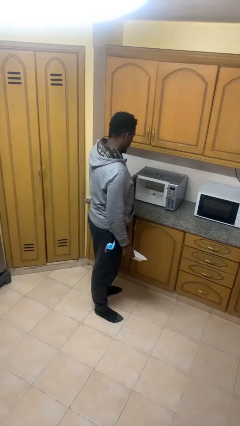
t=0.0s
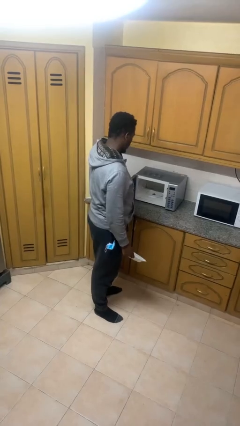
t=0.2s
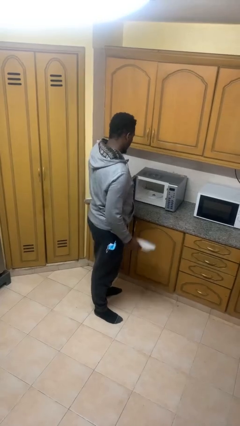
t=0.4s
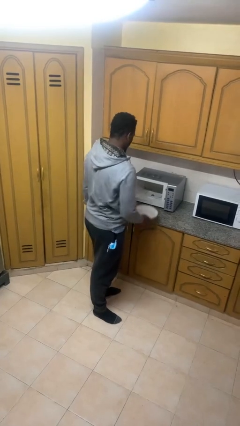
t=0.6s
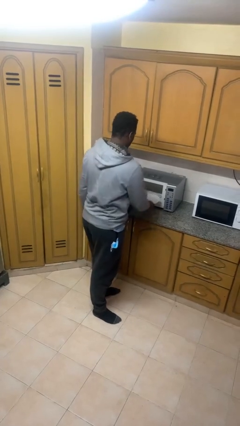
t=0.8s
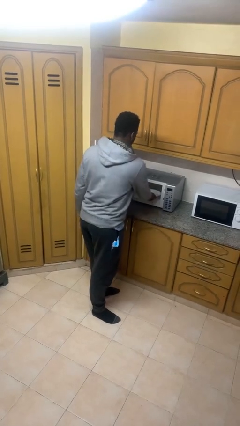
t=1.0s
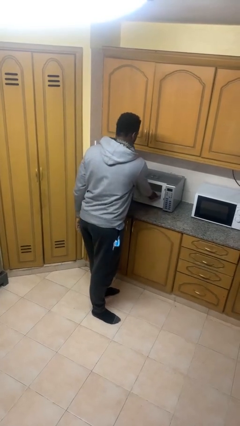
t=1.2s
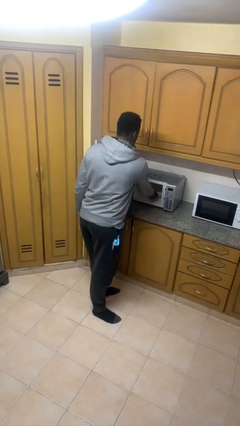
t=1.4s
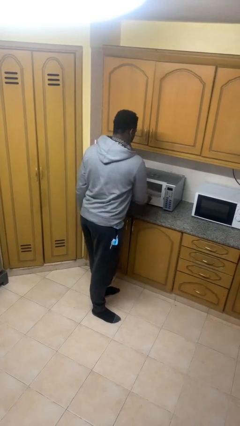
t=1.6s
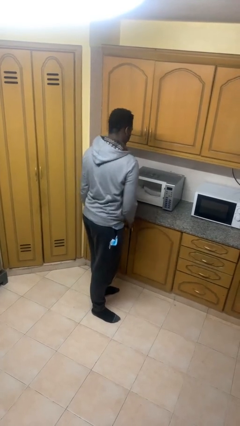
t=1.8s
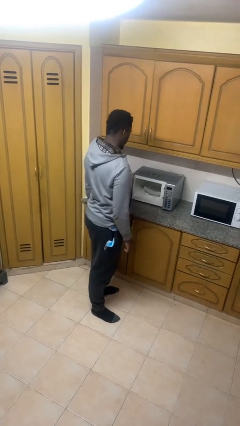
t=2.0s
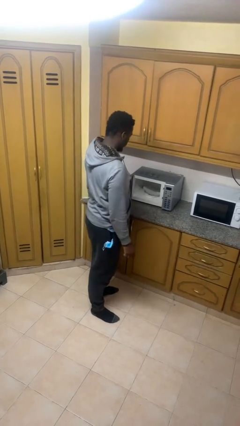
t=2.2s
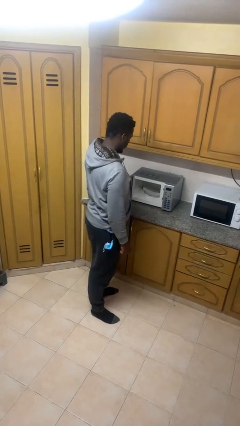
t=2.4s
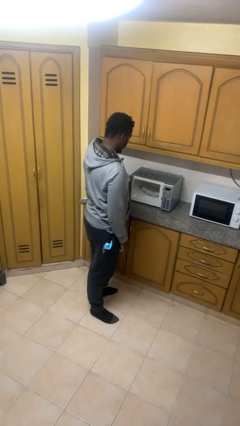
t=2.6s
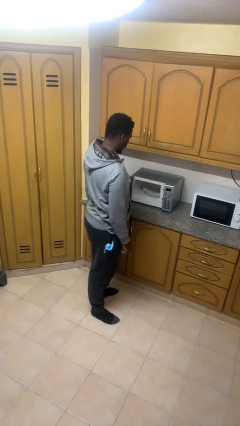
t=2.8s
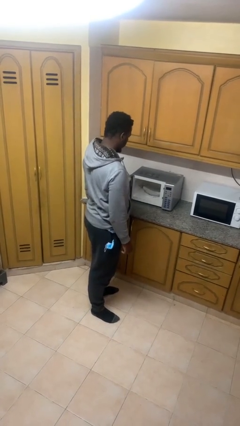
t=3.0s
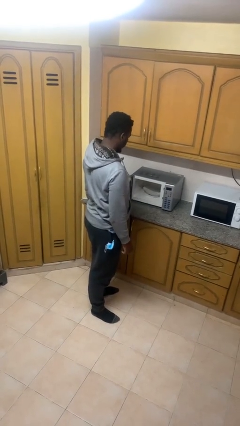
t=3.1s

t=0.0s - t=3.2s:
person puts object into microwave

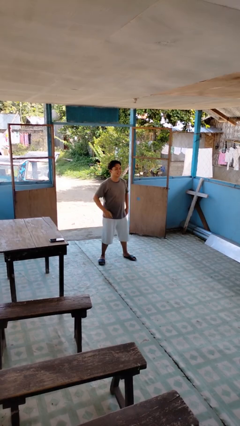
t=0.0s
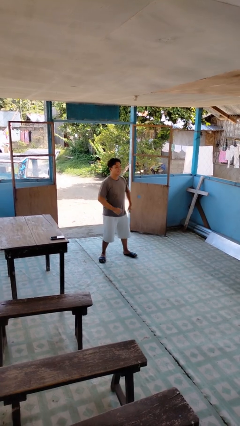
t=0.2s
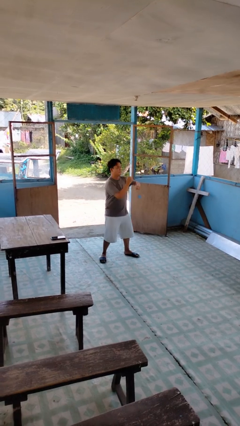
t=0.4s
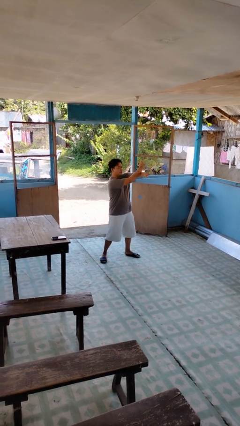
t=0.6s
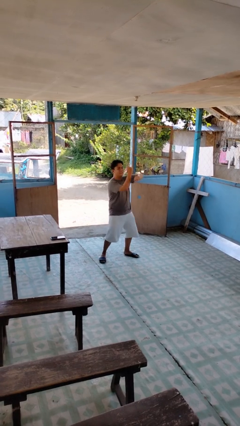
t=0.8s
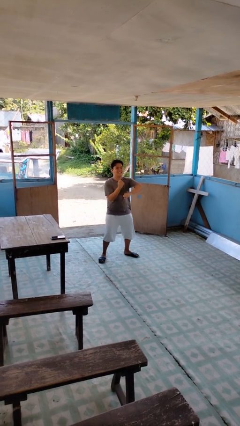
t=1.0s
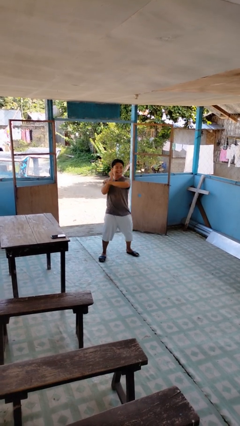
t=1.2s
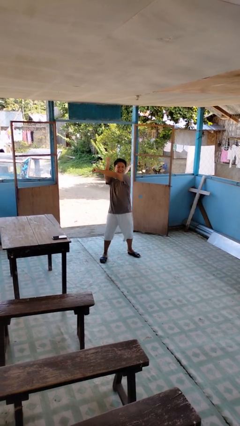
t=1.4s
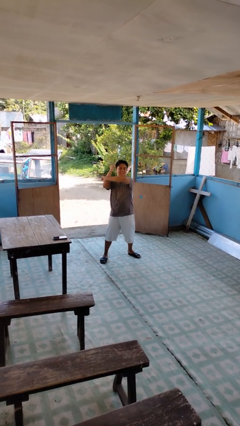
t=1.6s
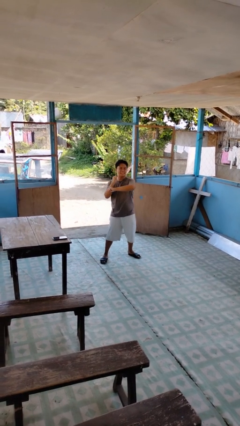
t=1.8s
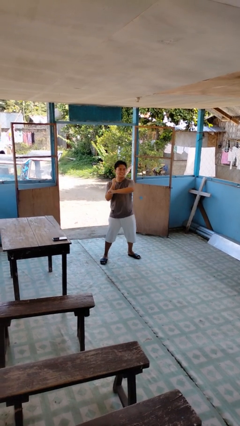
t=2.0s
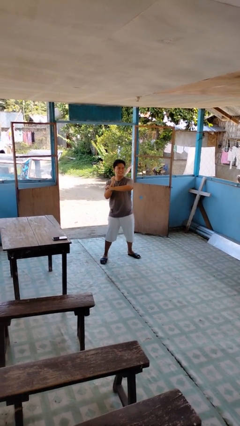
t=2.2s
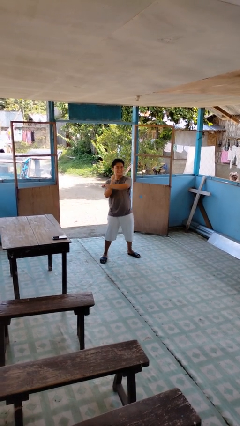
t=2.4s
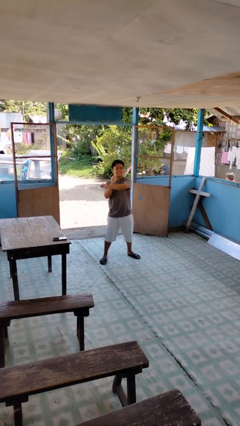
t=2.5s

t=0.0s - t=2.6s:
person dances in place

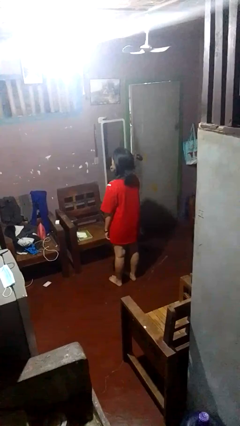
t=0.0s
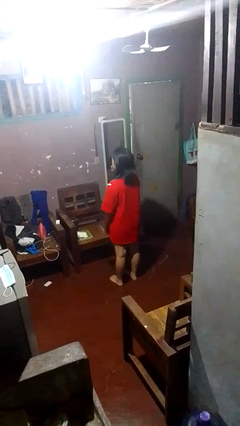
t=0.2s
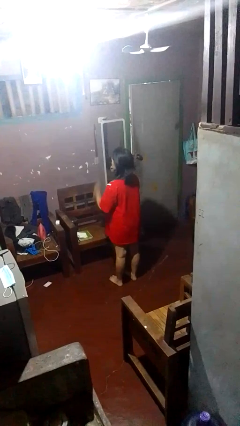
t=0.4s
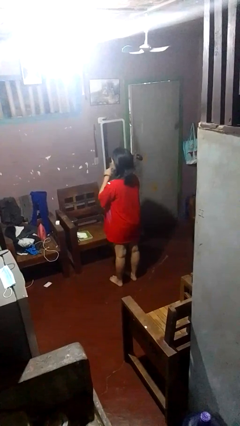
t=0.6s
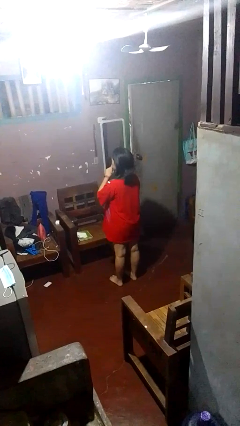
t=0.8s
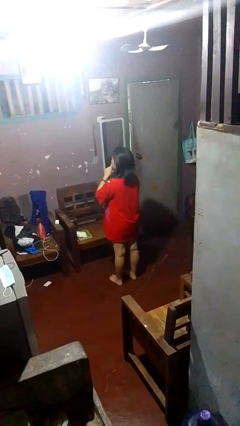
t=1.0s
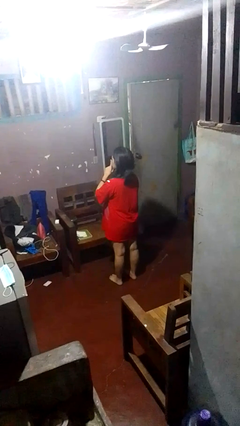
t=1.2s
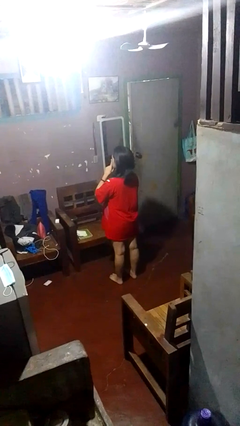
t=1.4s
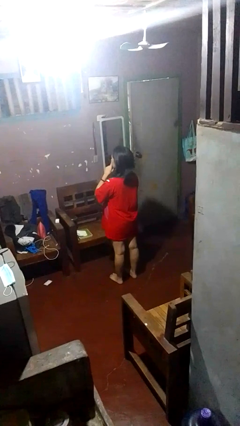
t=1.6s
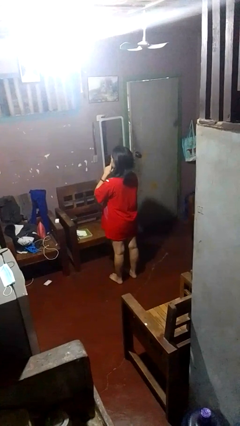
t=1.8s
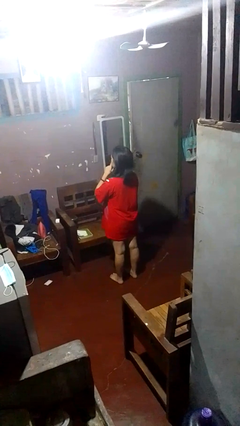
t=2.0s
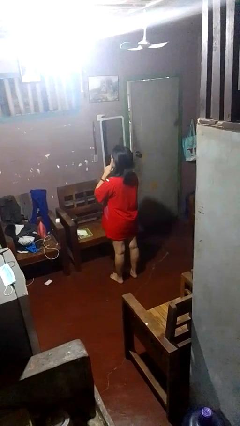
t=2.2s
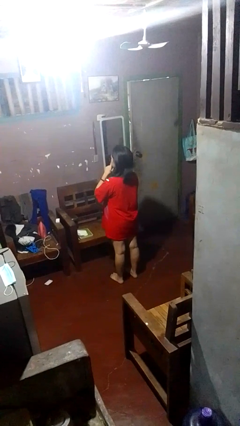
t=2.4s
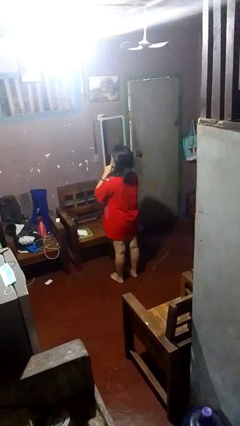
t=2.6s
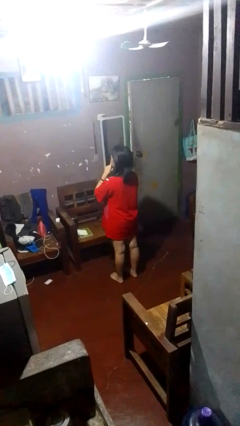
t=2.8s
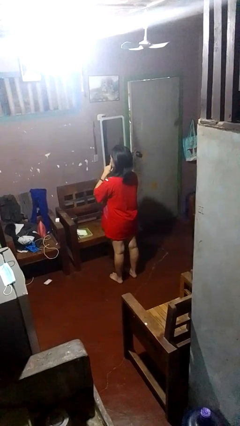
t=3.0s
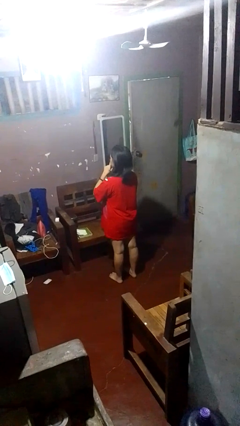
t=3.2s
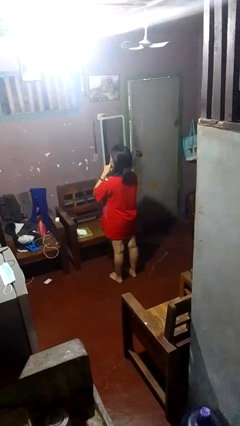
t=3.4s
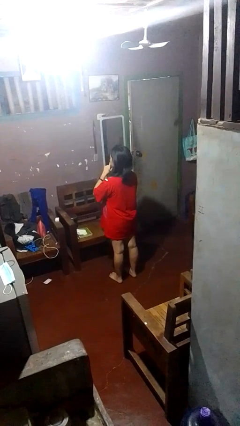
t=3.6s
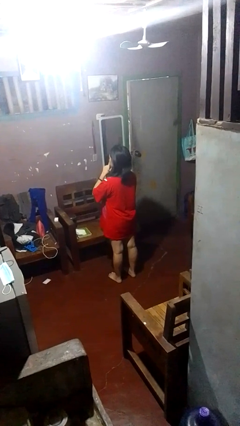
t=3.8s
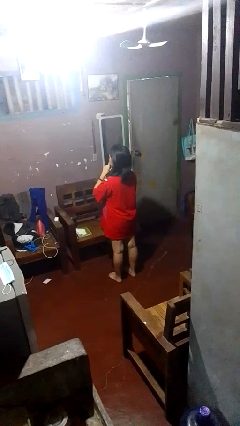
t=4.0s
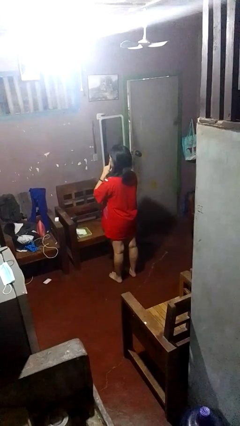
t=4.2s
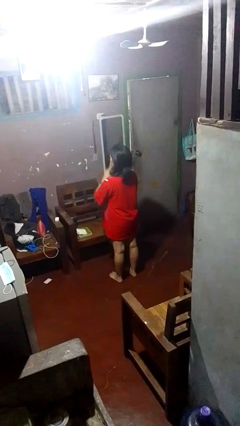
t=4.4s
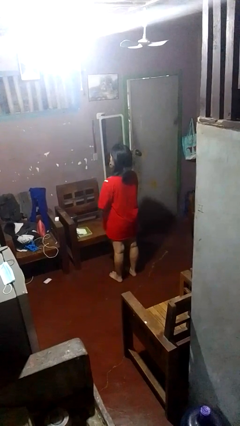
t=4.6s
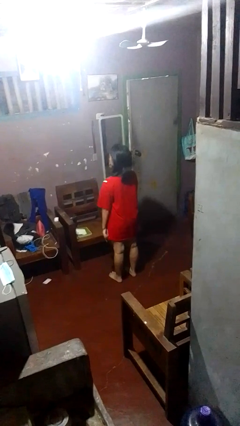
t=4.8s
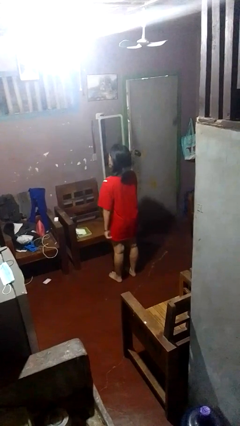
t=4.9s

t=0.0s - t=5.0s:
person gestures be quiet

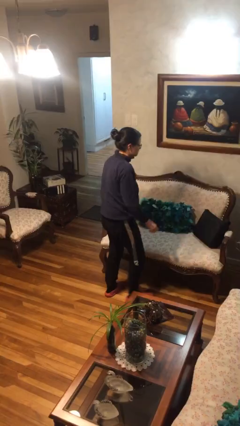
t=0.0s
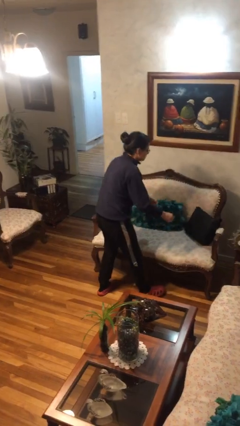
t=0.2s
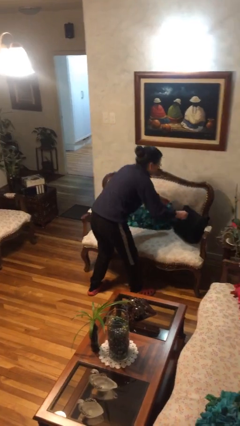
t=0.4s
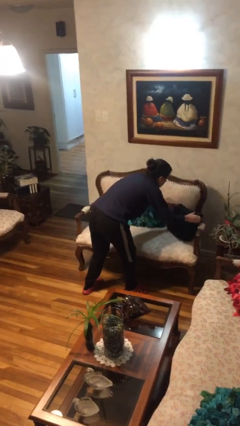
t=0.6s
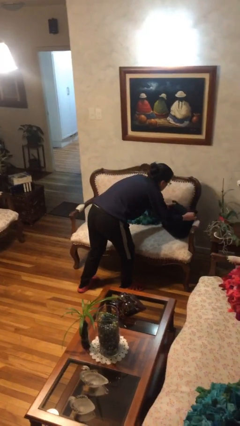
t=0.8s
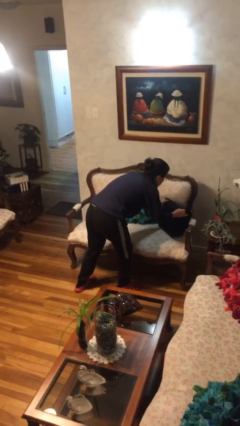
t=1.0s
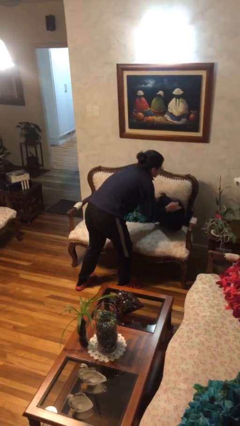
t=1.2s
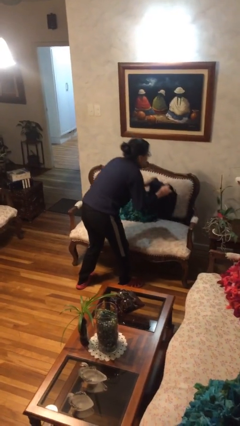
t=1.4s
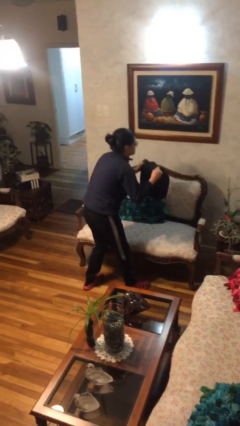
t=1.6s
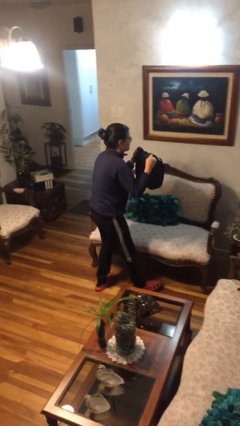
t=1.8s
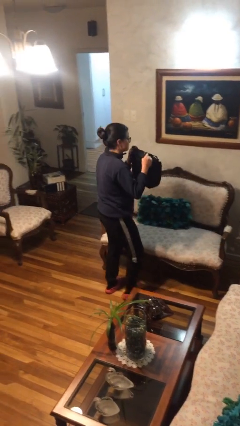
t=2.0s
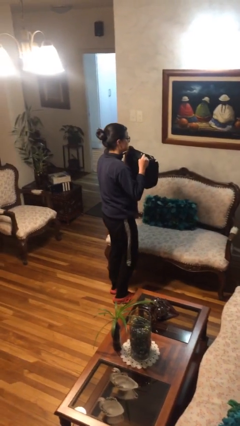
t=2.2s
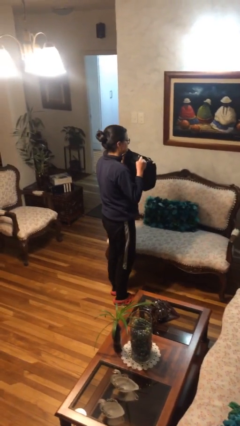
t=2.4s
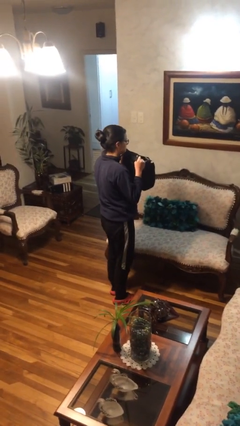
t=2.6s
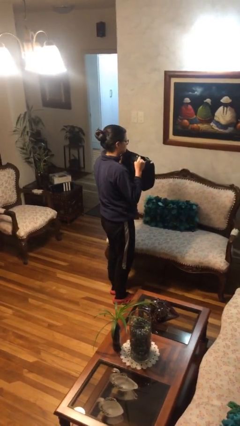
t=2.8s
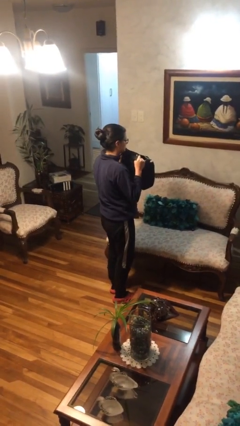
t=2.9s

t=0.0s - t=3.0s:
person picks up object from couch

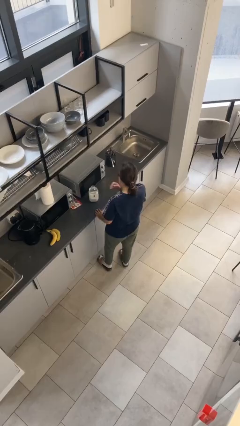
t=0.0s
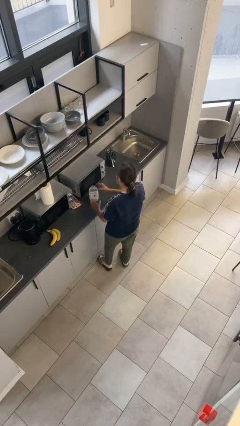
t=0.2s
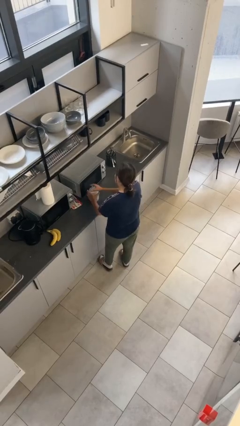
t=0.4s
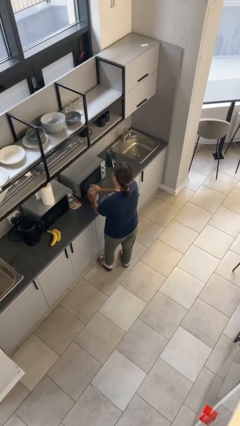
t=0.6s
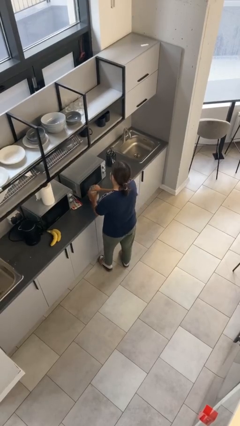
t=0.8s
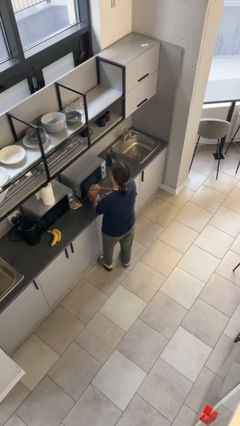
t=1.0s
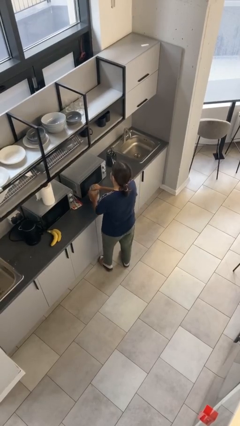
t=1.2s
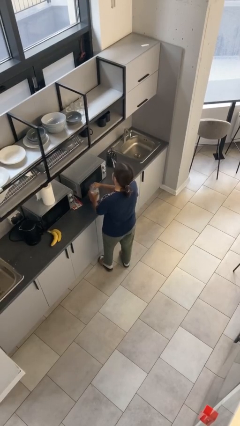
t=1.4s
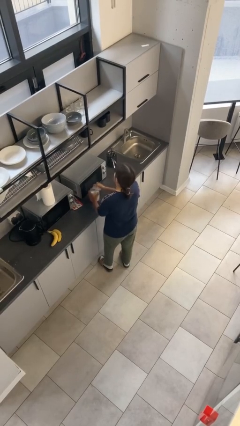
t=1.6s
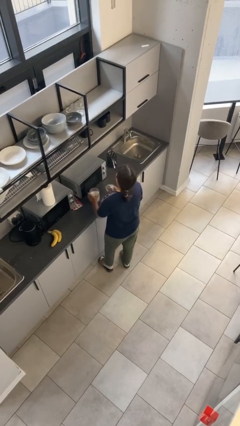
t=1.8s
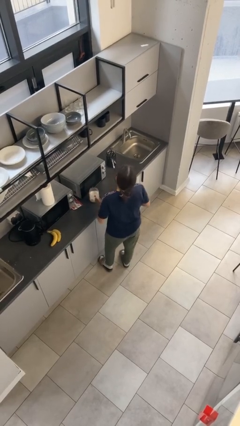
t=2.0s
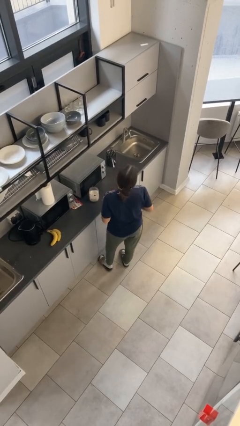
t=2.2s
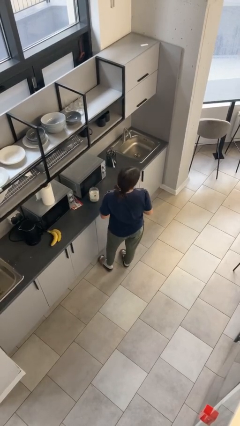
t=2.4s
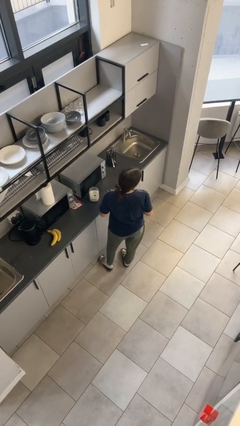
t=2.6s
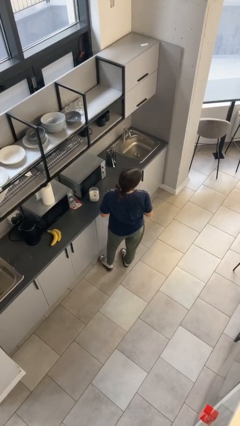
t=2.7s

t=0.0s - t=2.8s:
person opens jar

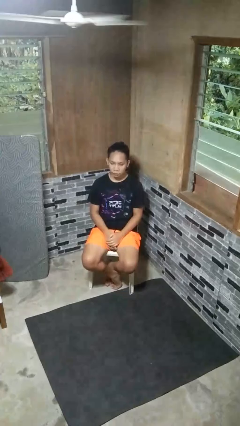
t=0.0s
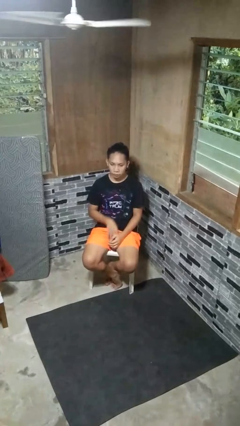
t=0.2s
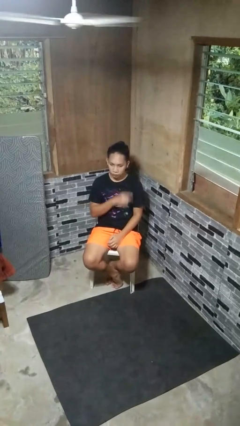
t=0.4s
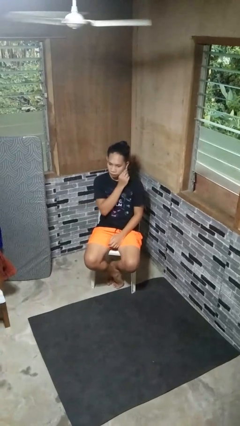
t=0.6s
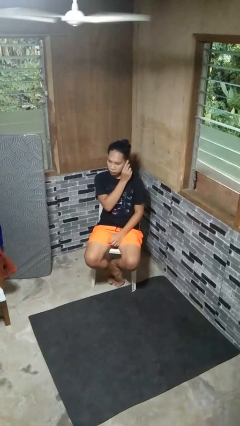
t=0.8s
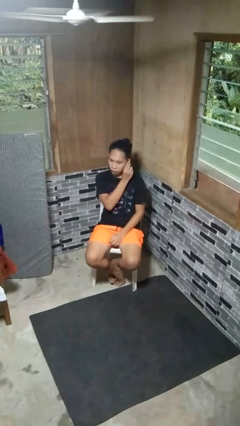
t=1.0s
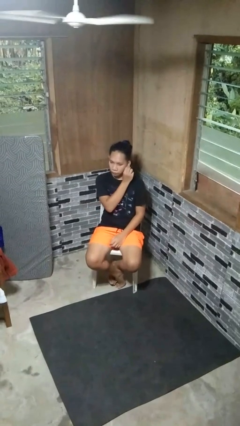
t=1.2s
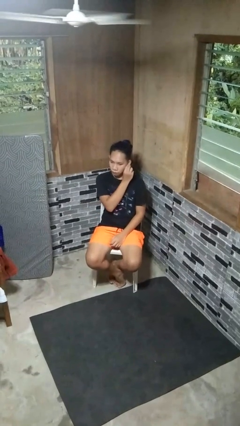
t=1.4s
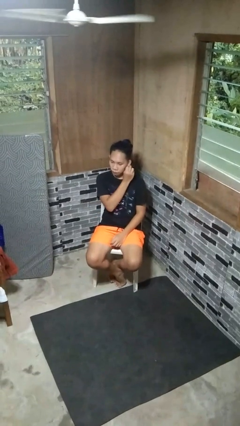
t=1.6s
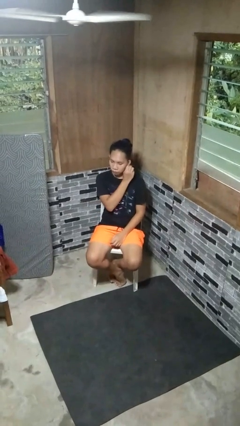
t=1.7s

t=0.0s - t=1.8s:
person touches earlobe
